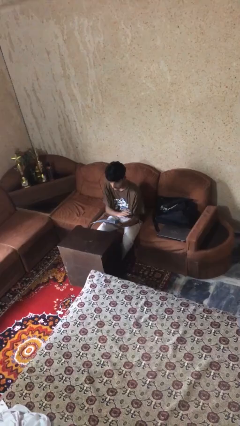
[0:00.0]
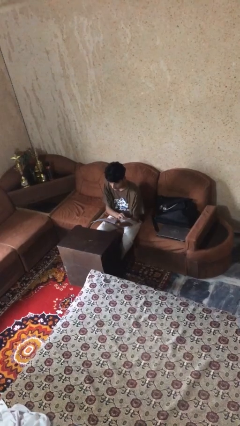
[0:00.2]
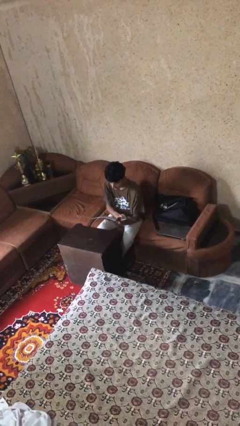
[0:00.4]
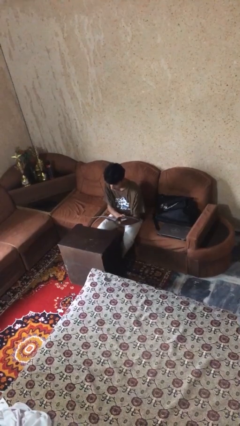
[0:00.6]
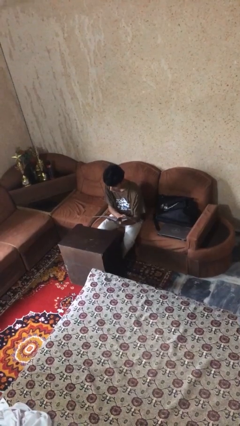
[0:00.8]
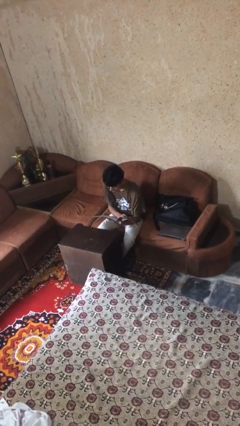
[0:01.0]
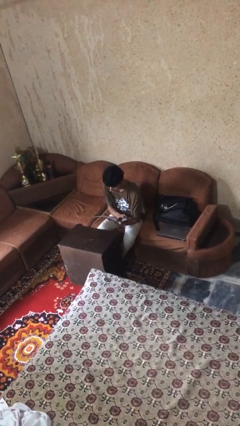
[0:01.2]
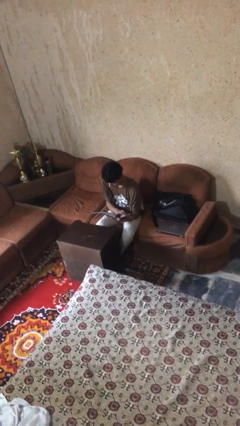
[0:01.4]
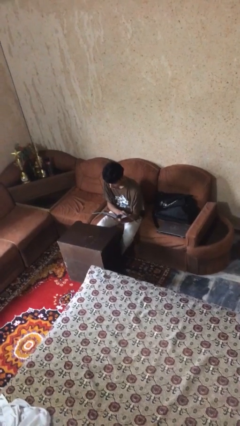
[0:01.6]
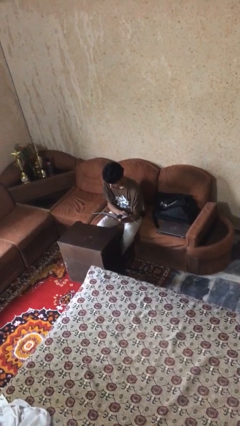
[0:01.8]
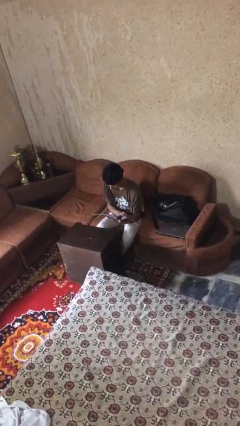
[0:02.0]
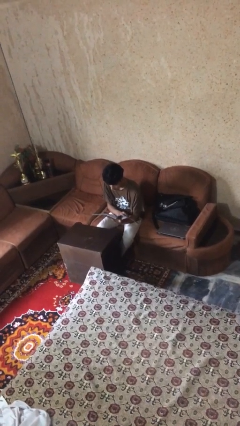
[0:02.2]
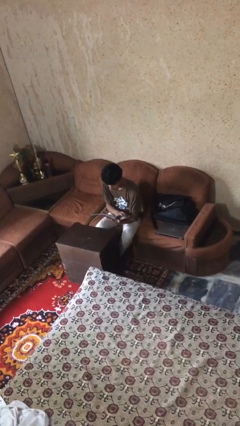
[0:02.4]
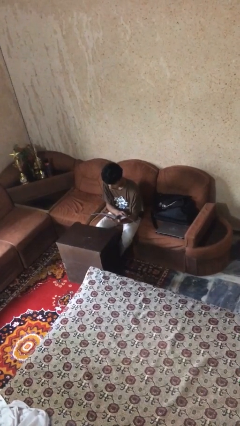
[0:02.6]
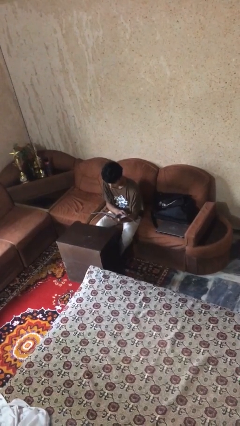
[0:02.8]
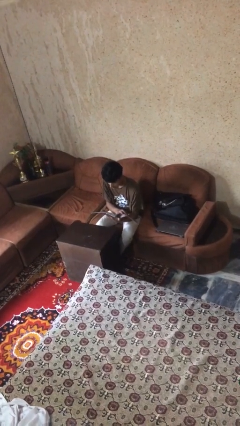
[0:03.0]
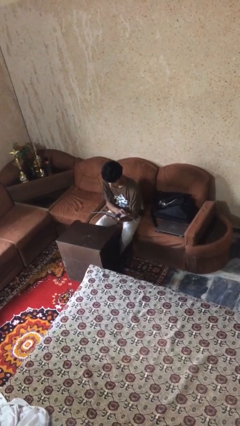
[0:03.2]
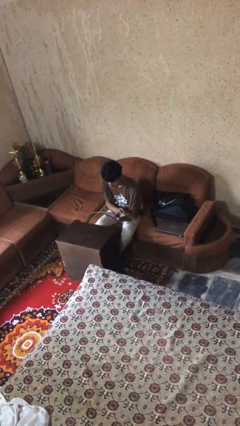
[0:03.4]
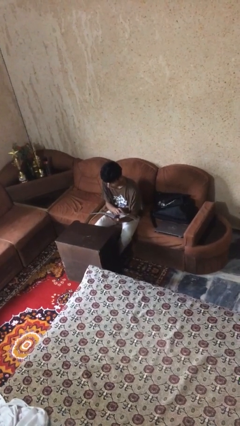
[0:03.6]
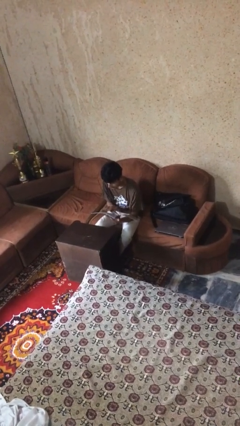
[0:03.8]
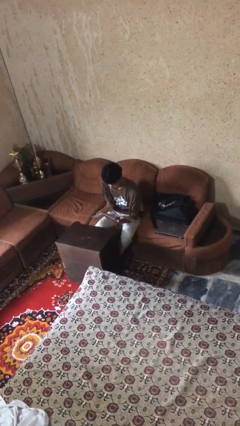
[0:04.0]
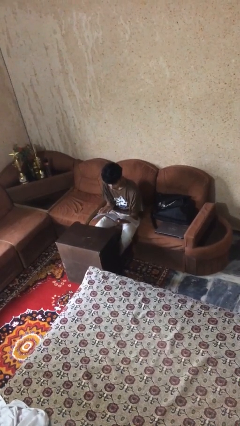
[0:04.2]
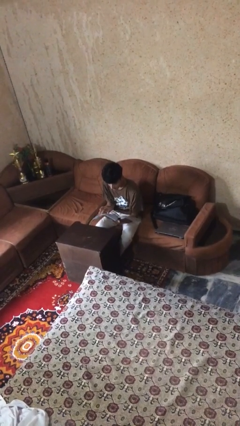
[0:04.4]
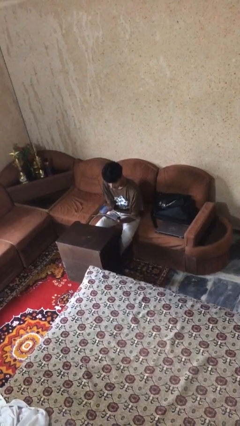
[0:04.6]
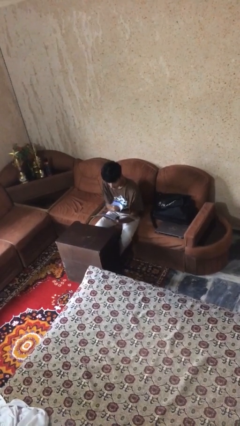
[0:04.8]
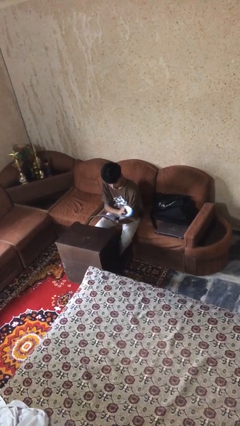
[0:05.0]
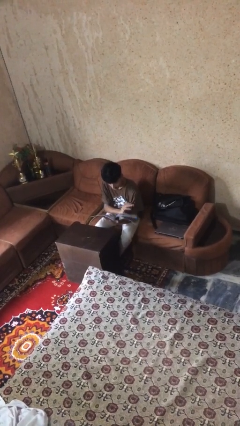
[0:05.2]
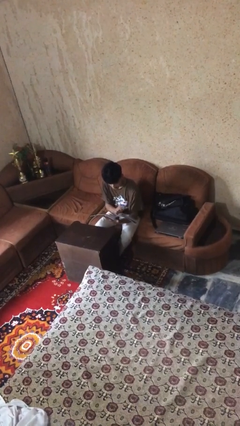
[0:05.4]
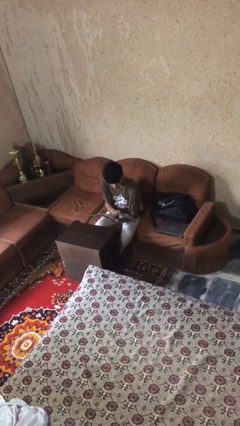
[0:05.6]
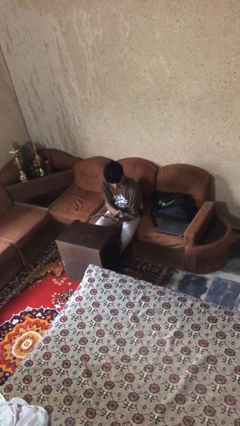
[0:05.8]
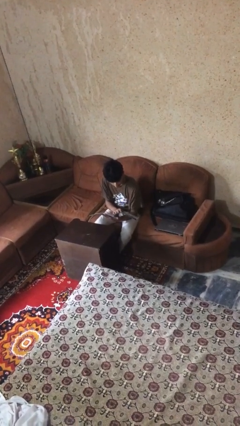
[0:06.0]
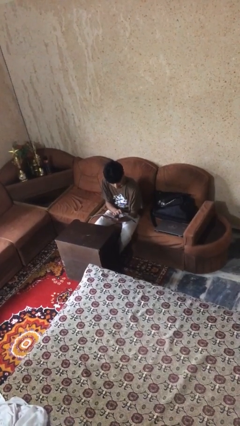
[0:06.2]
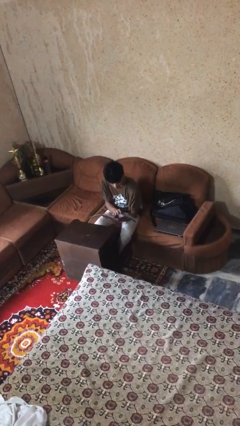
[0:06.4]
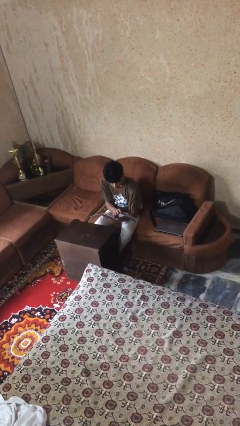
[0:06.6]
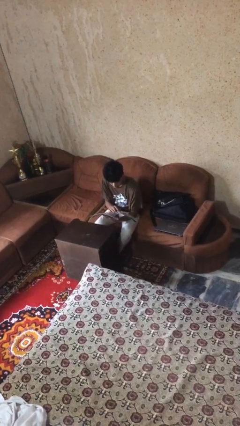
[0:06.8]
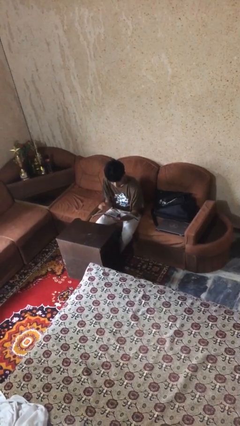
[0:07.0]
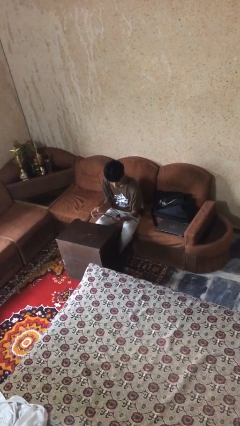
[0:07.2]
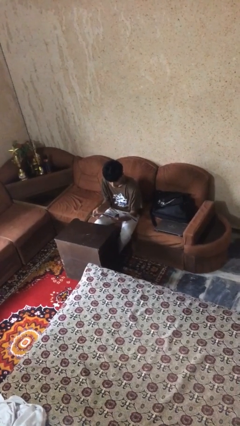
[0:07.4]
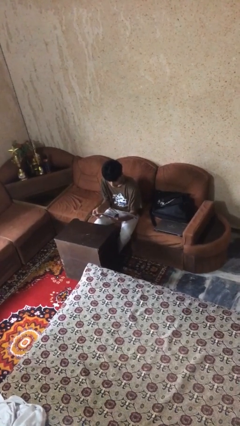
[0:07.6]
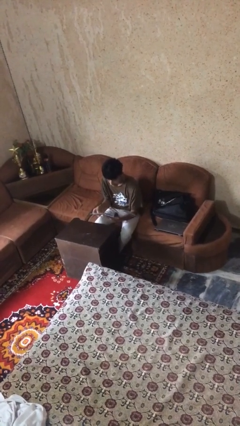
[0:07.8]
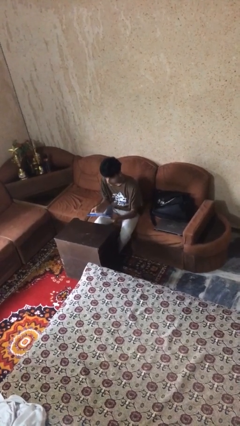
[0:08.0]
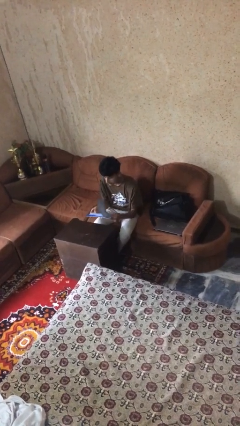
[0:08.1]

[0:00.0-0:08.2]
person reads document

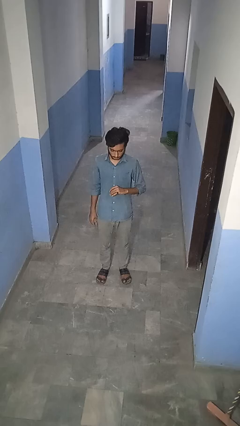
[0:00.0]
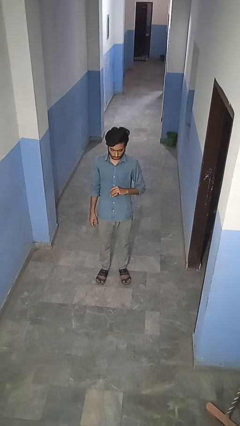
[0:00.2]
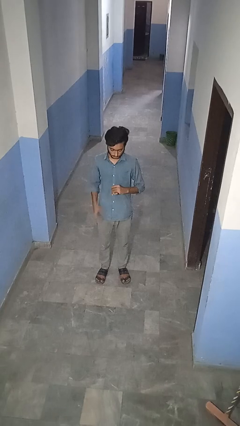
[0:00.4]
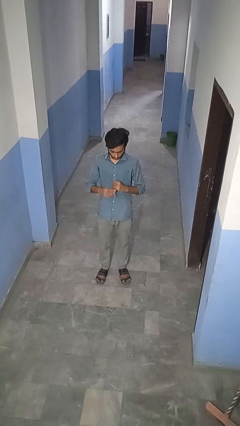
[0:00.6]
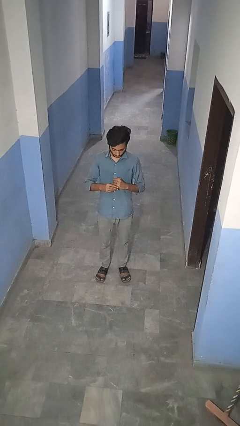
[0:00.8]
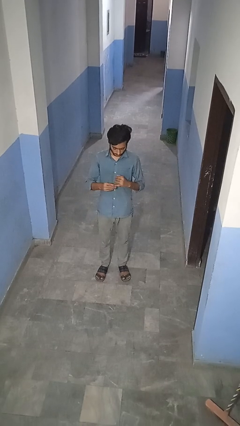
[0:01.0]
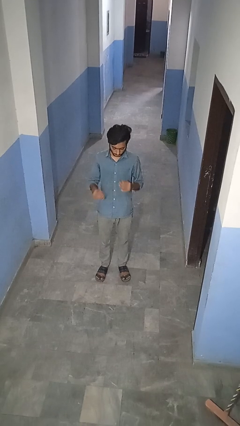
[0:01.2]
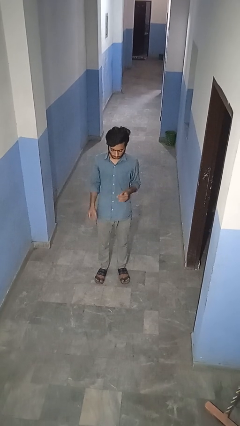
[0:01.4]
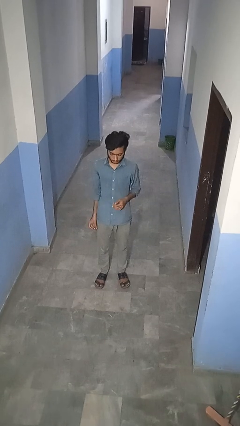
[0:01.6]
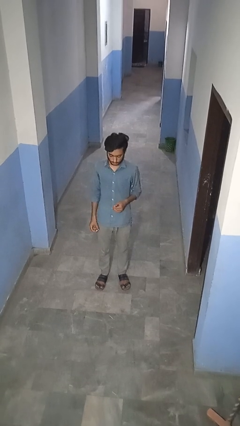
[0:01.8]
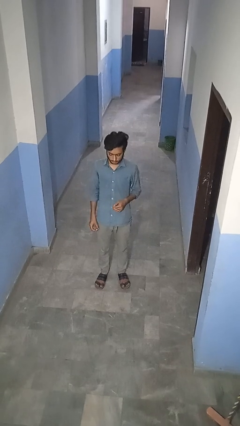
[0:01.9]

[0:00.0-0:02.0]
person takes off ring

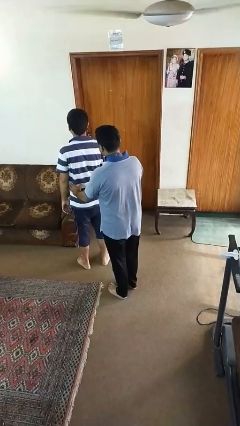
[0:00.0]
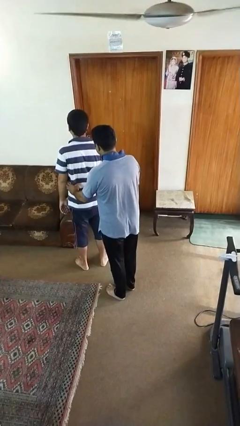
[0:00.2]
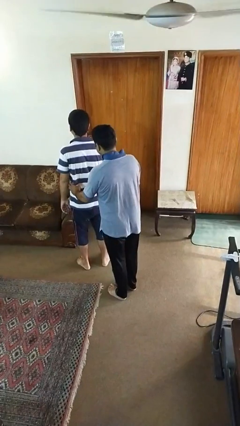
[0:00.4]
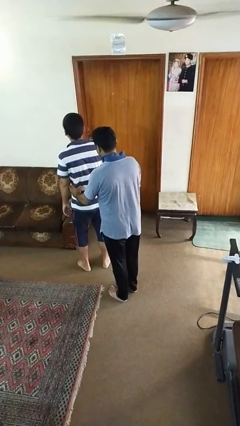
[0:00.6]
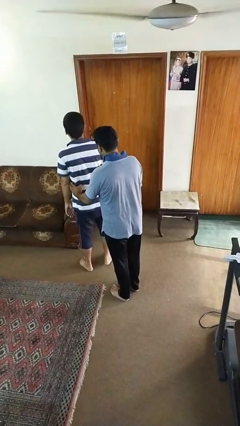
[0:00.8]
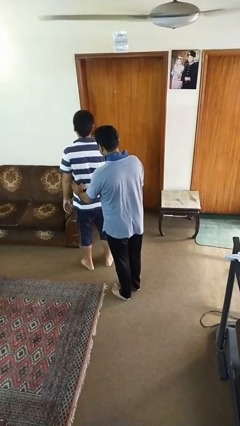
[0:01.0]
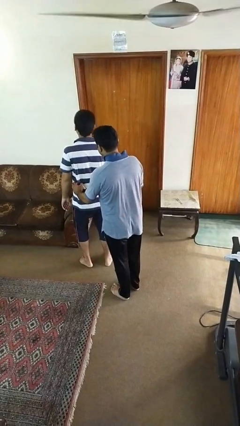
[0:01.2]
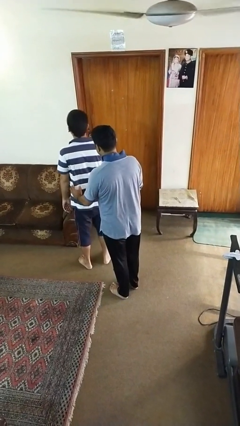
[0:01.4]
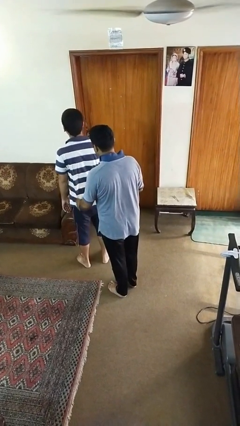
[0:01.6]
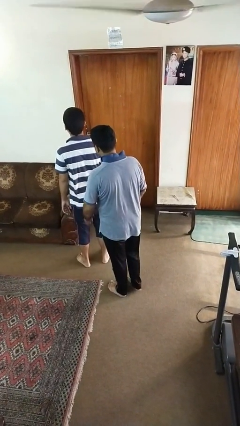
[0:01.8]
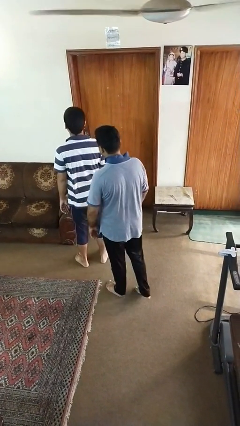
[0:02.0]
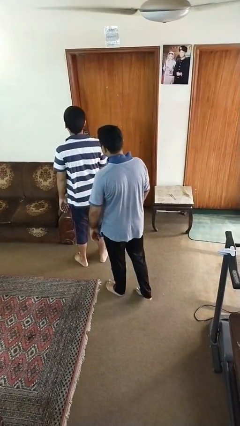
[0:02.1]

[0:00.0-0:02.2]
person tickles person

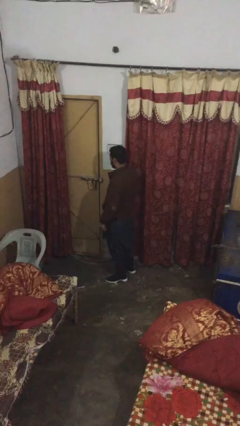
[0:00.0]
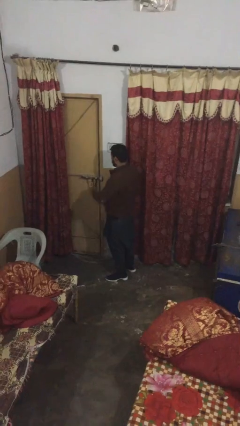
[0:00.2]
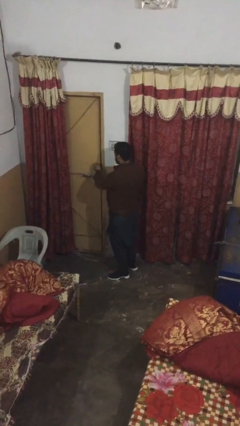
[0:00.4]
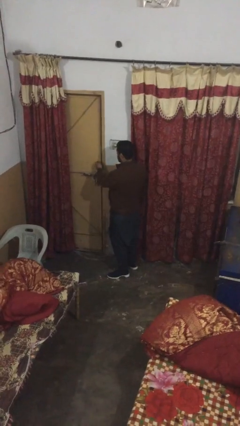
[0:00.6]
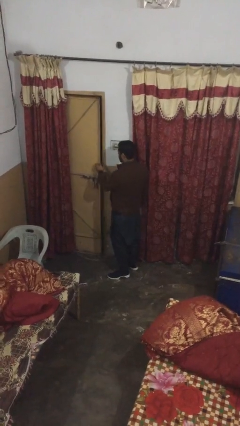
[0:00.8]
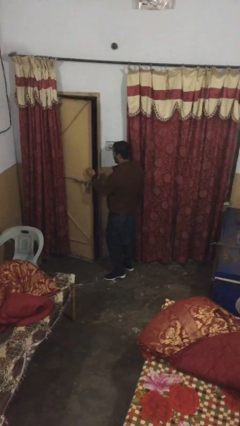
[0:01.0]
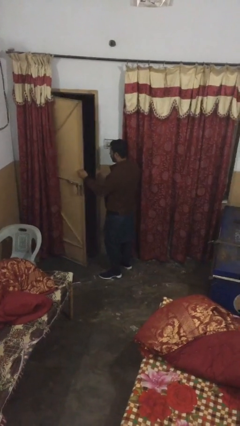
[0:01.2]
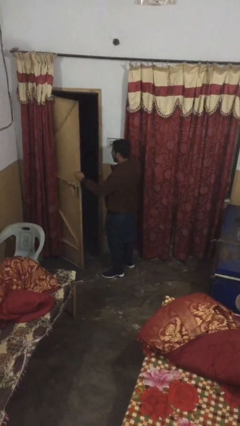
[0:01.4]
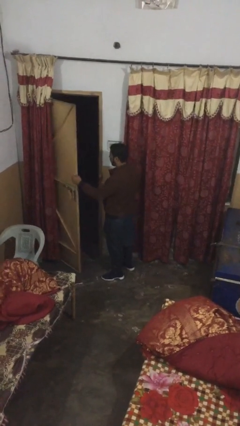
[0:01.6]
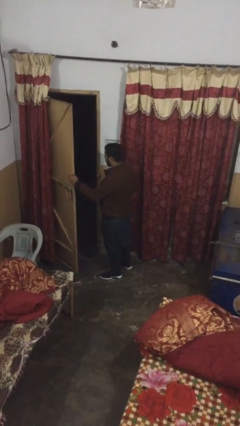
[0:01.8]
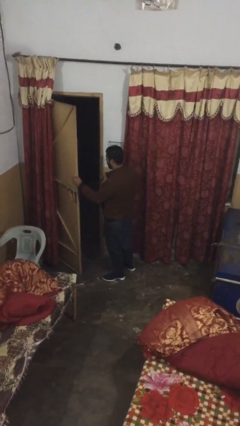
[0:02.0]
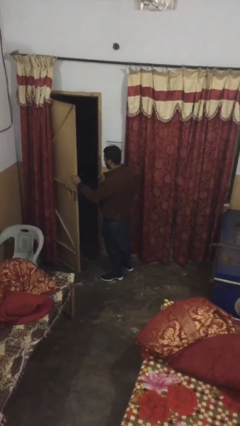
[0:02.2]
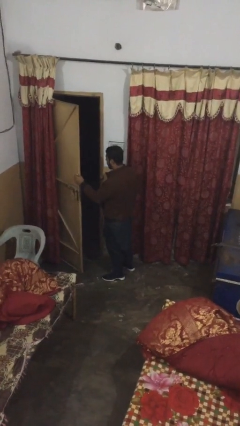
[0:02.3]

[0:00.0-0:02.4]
person opens facility door

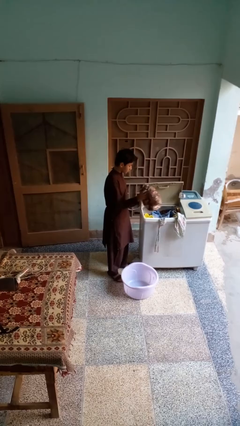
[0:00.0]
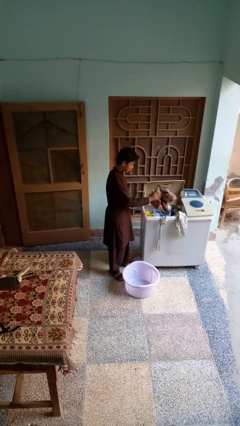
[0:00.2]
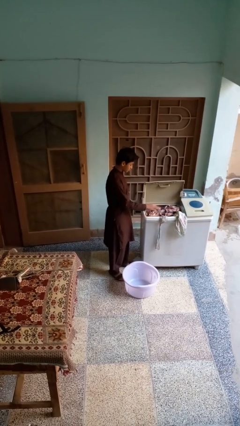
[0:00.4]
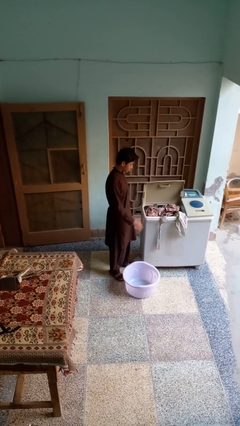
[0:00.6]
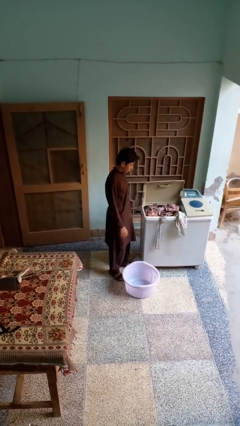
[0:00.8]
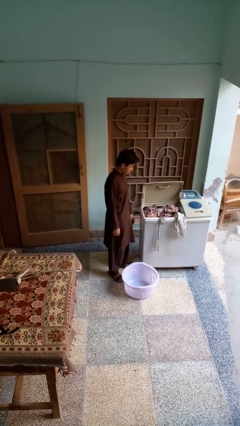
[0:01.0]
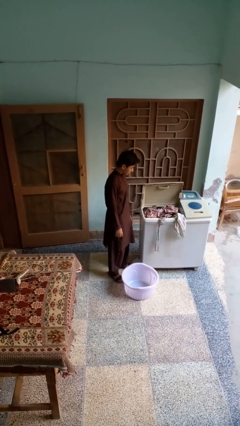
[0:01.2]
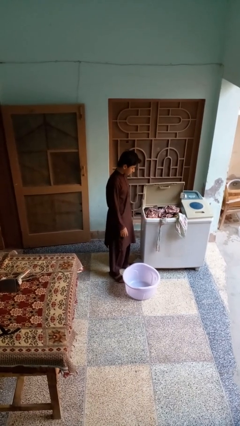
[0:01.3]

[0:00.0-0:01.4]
person unloads clotheswasher

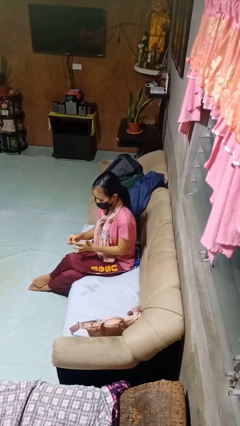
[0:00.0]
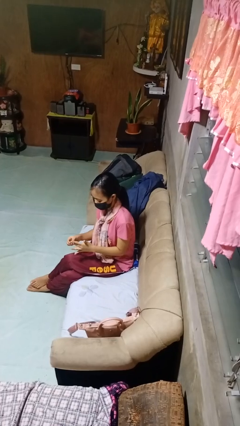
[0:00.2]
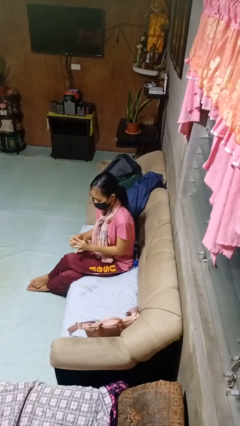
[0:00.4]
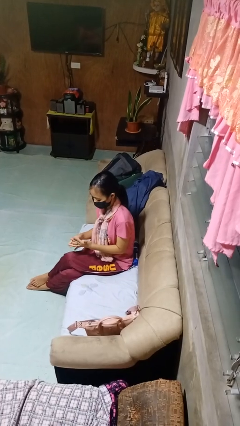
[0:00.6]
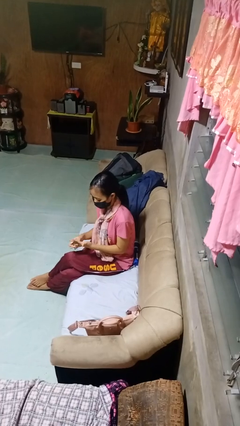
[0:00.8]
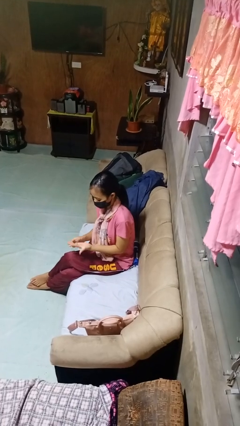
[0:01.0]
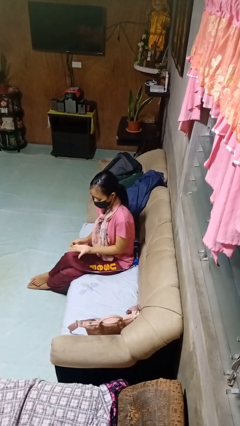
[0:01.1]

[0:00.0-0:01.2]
person puts on ring
